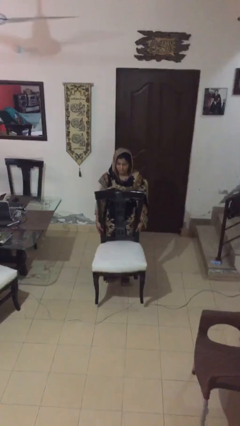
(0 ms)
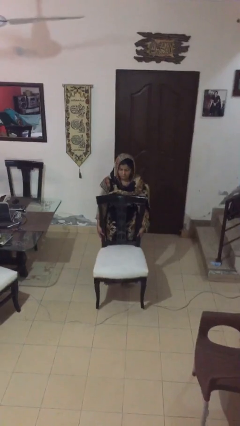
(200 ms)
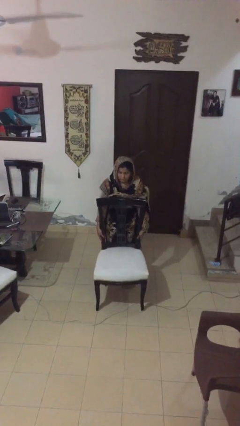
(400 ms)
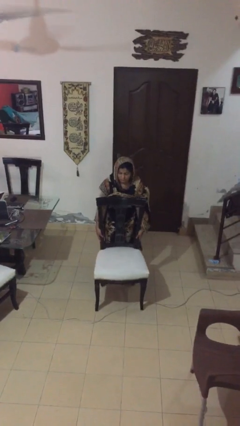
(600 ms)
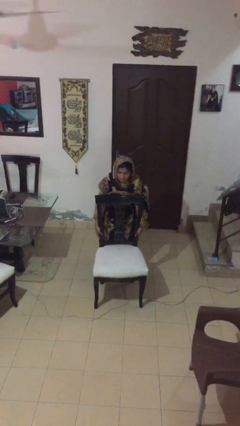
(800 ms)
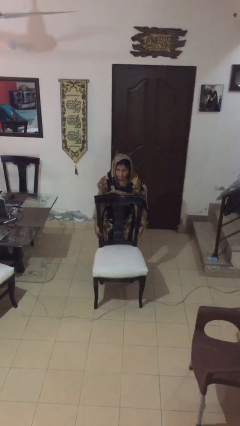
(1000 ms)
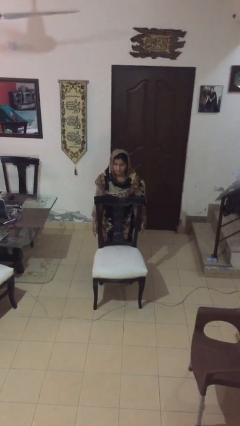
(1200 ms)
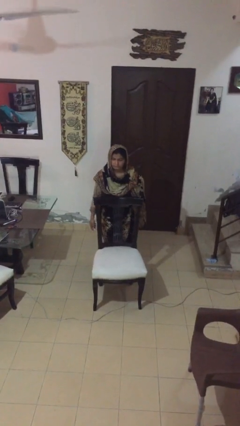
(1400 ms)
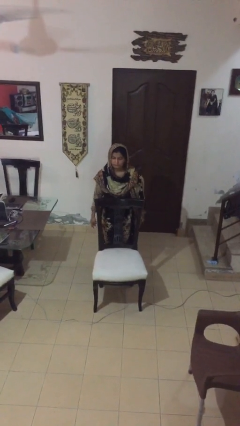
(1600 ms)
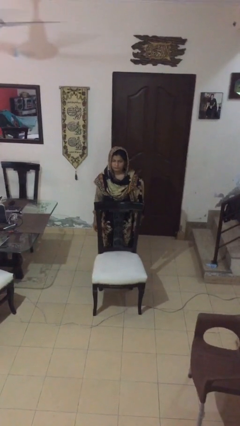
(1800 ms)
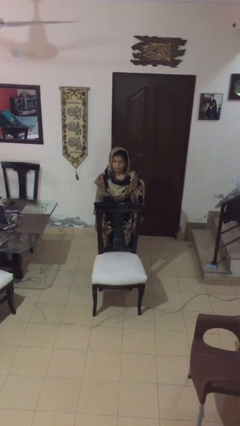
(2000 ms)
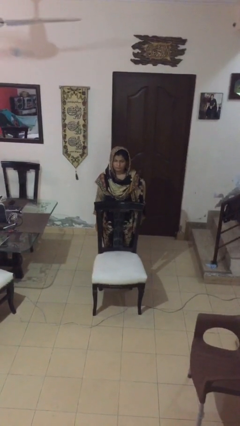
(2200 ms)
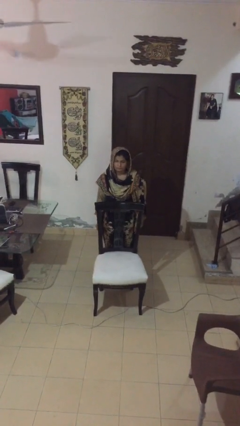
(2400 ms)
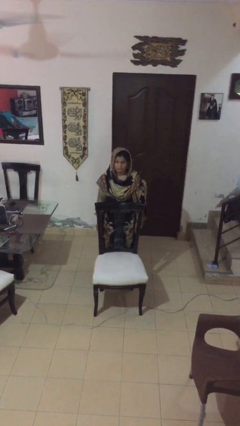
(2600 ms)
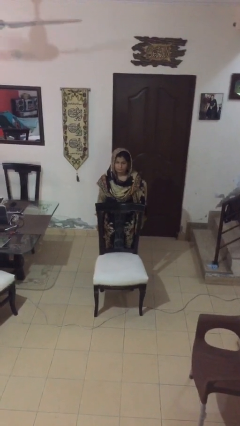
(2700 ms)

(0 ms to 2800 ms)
person puts down object on floor

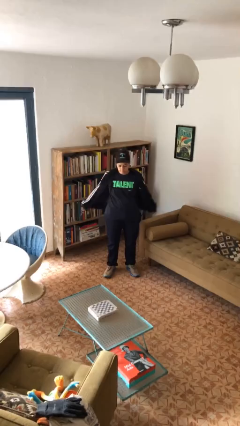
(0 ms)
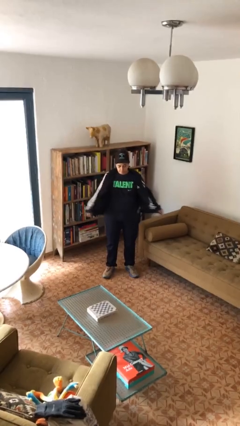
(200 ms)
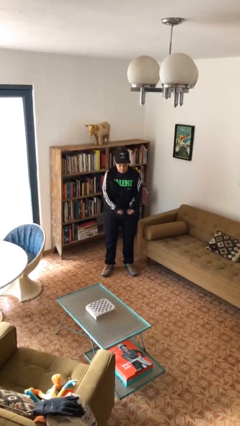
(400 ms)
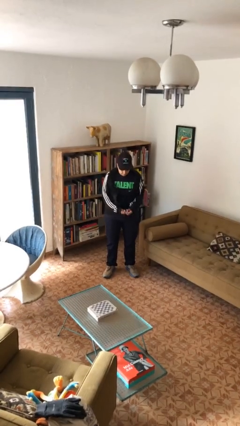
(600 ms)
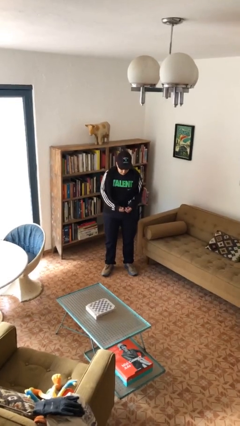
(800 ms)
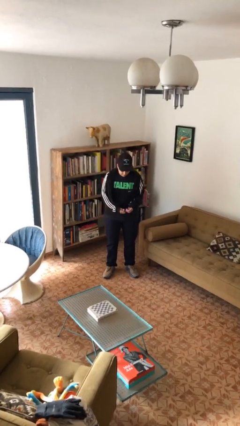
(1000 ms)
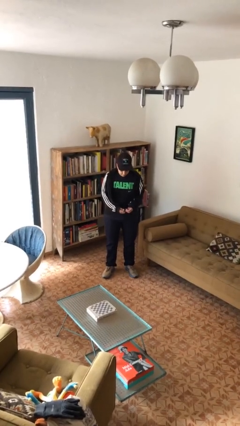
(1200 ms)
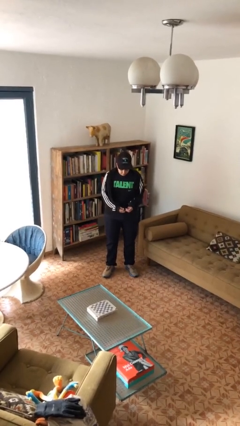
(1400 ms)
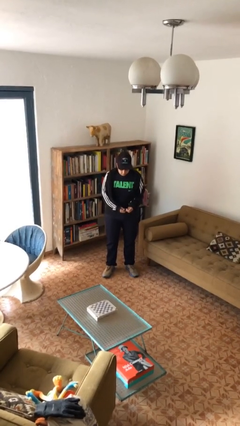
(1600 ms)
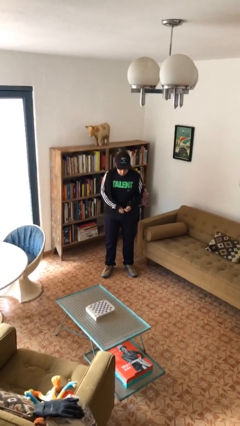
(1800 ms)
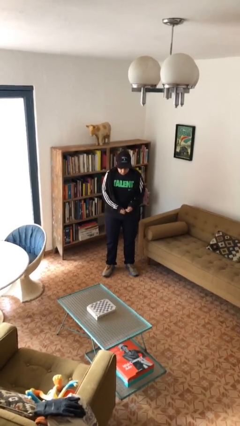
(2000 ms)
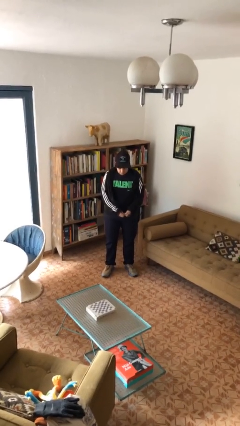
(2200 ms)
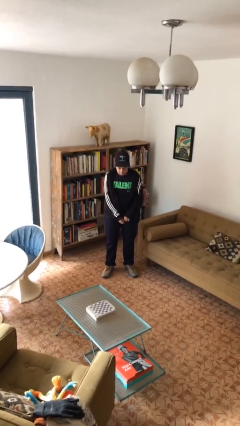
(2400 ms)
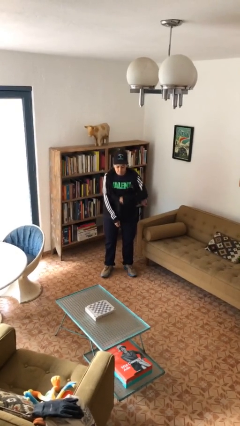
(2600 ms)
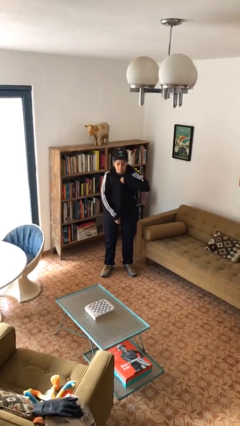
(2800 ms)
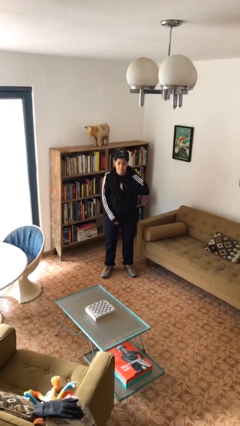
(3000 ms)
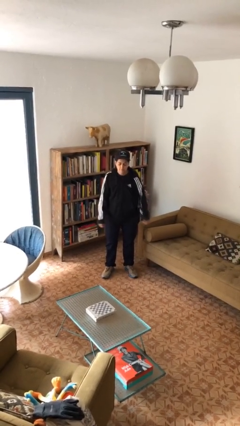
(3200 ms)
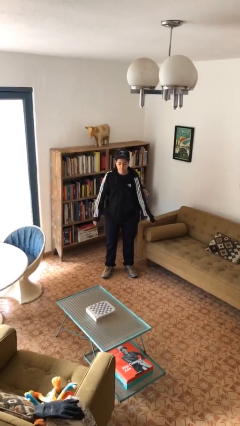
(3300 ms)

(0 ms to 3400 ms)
person zips up jacket

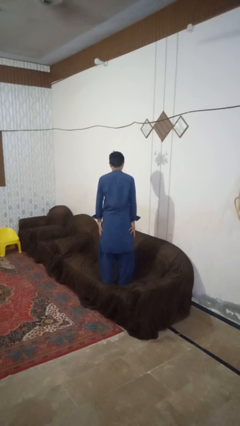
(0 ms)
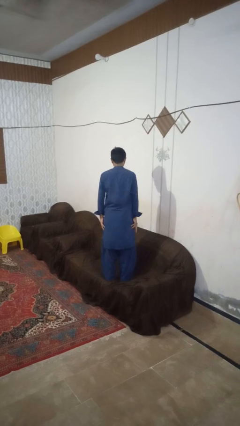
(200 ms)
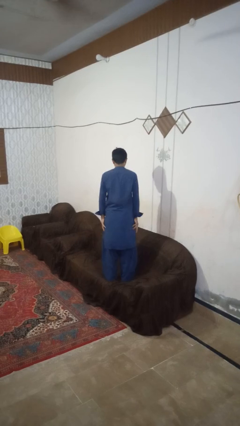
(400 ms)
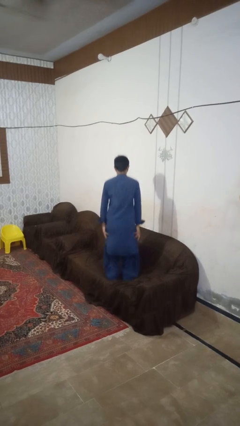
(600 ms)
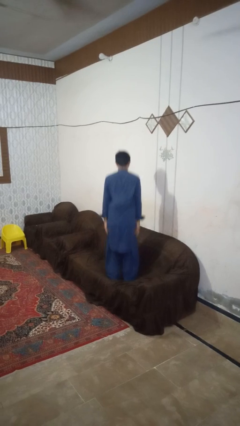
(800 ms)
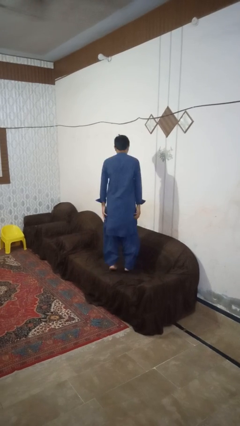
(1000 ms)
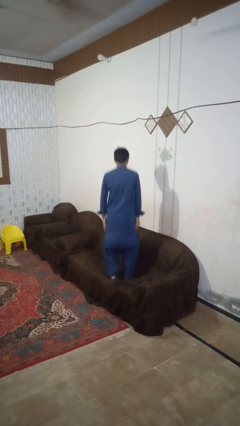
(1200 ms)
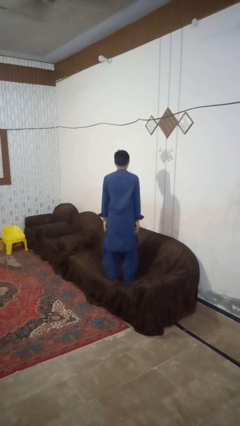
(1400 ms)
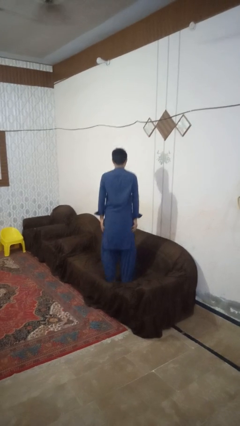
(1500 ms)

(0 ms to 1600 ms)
person jumps on couch

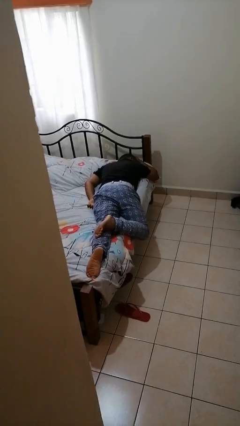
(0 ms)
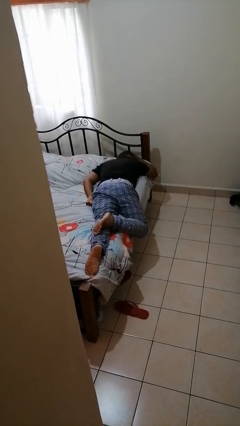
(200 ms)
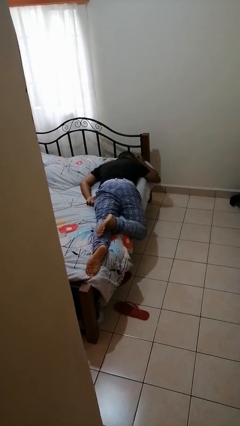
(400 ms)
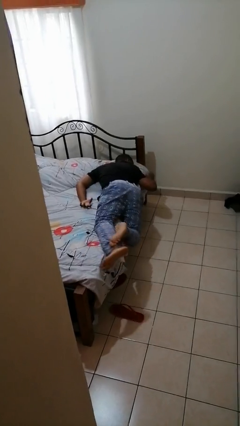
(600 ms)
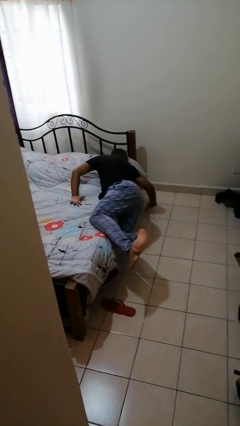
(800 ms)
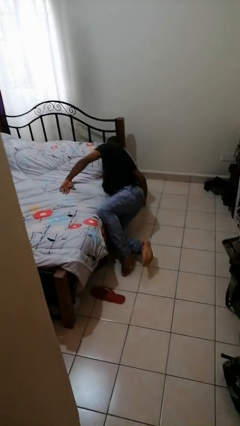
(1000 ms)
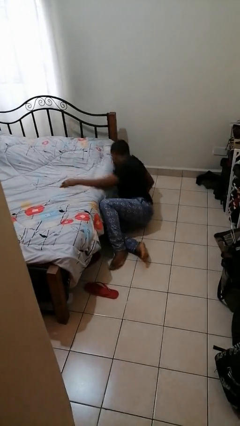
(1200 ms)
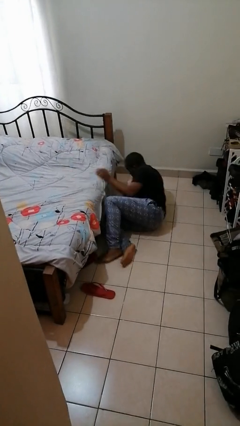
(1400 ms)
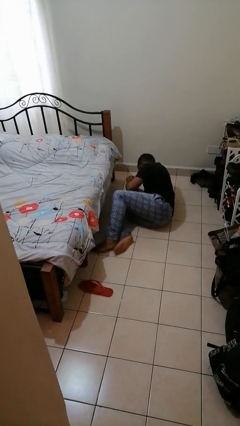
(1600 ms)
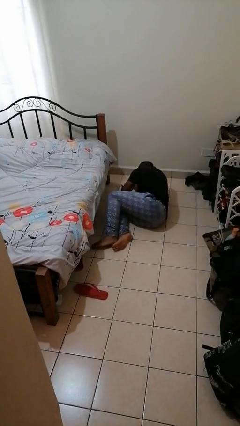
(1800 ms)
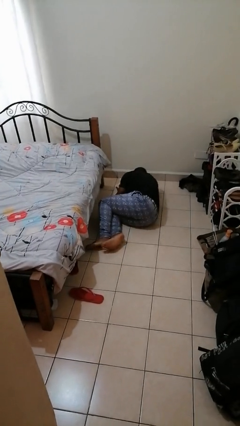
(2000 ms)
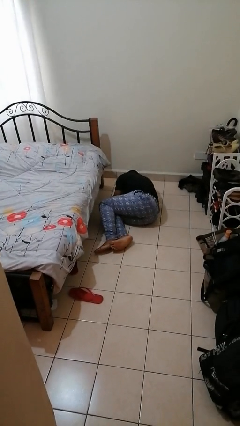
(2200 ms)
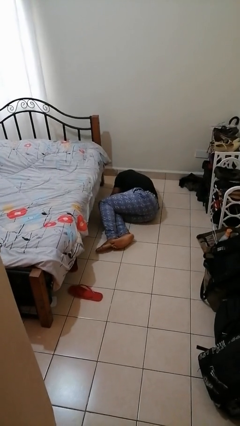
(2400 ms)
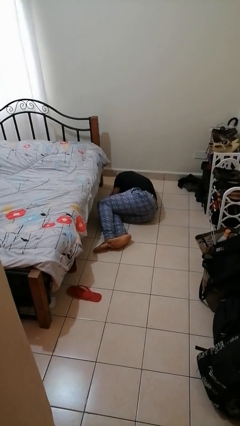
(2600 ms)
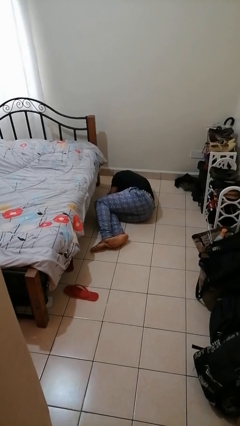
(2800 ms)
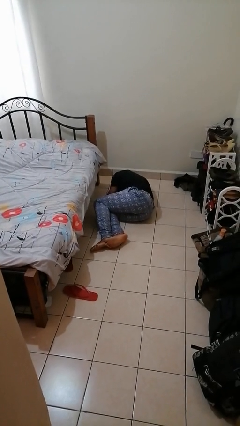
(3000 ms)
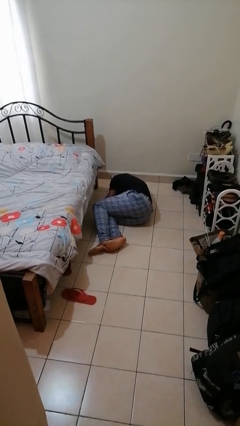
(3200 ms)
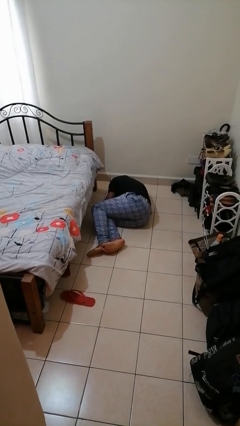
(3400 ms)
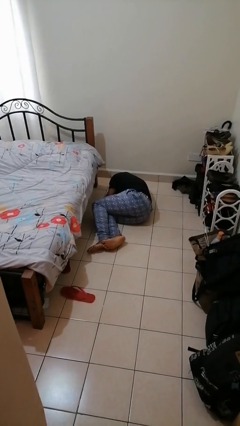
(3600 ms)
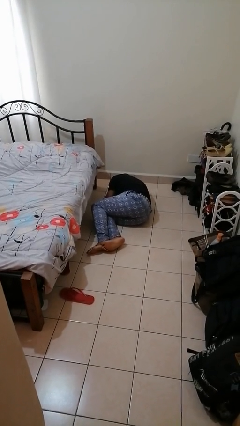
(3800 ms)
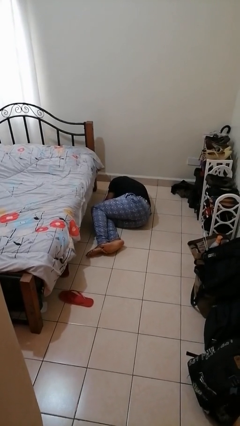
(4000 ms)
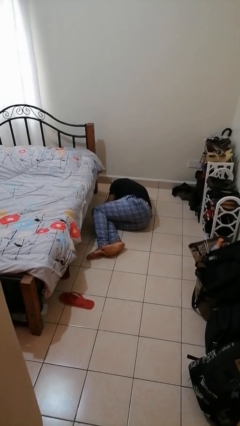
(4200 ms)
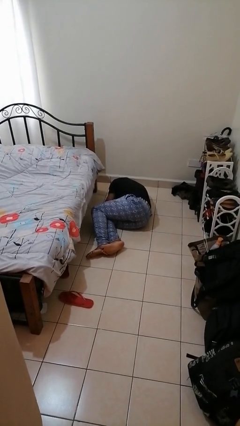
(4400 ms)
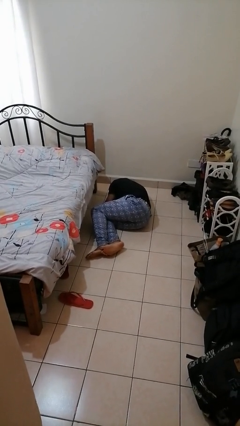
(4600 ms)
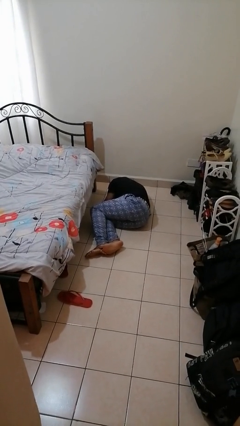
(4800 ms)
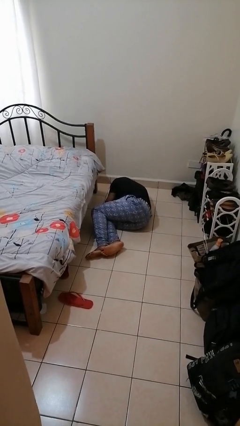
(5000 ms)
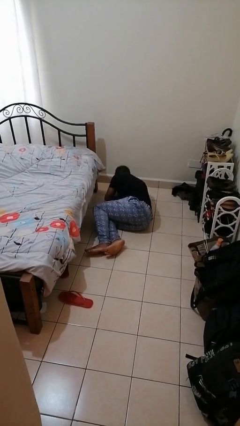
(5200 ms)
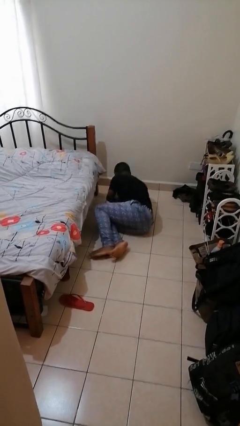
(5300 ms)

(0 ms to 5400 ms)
person falls from bed

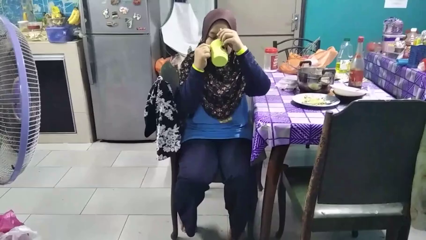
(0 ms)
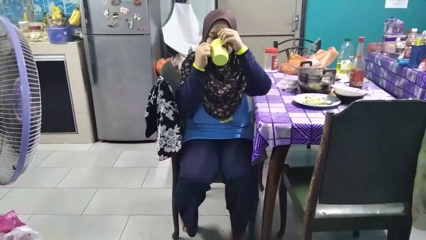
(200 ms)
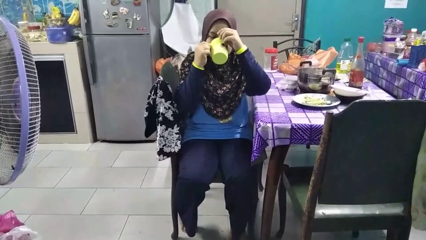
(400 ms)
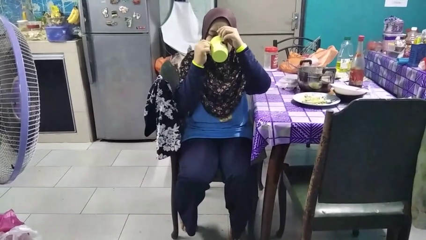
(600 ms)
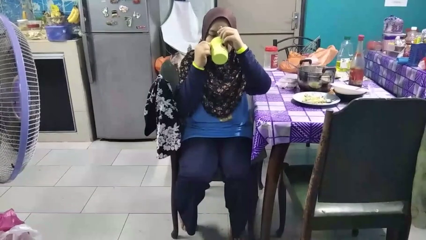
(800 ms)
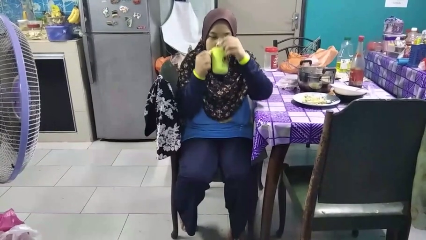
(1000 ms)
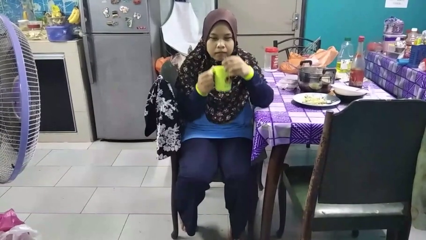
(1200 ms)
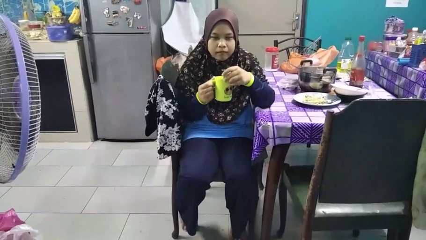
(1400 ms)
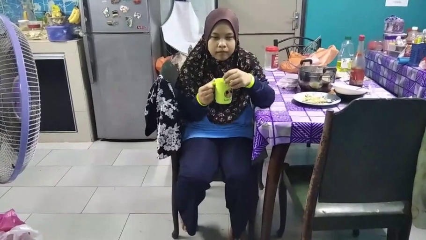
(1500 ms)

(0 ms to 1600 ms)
person drinks from mug

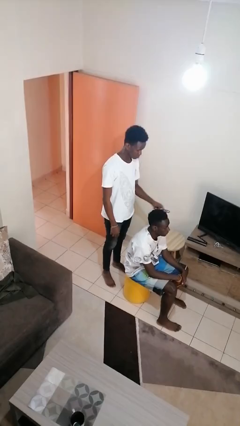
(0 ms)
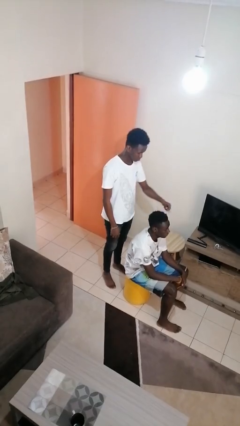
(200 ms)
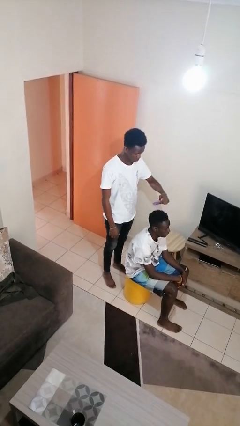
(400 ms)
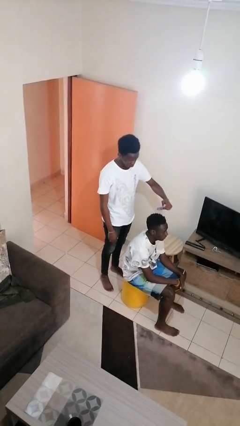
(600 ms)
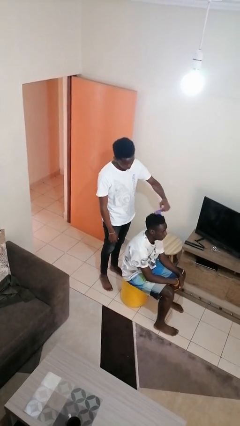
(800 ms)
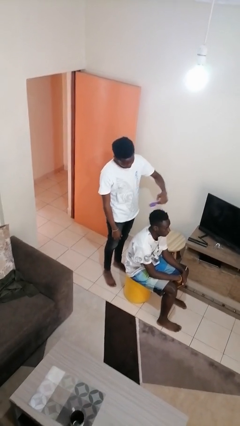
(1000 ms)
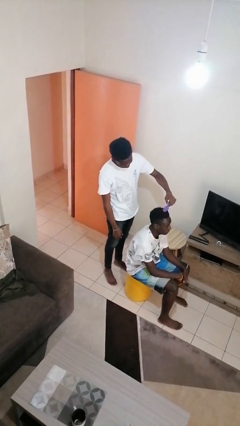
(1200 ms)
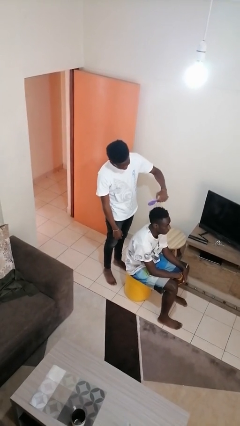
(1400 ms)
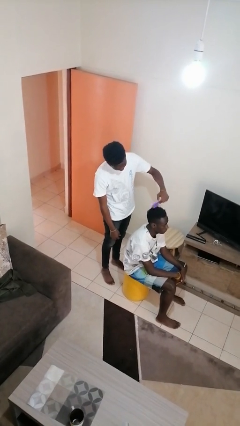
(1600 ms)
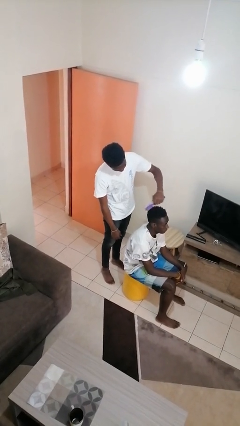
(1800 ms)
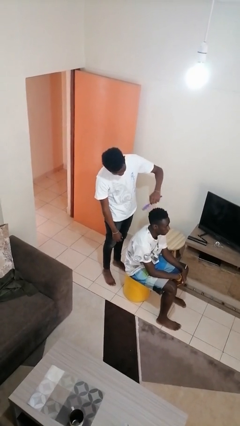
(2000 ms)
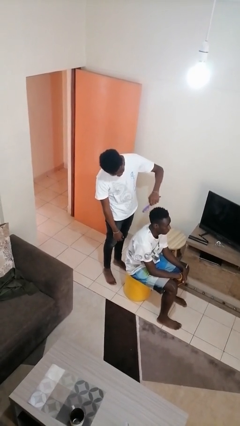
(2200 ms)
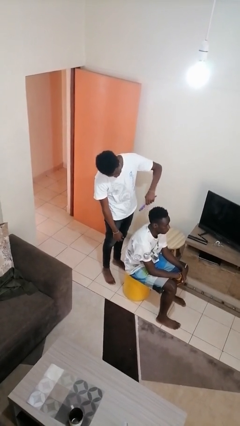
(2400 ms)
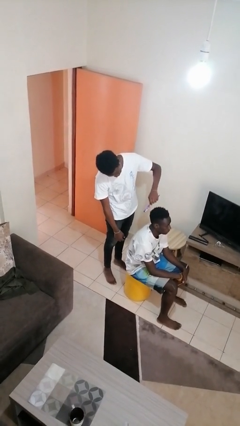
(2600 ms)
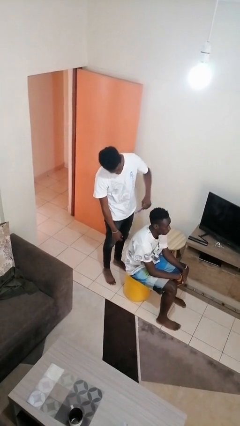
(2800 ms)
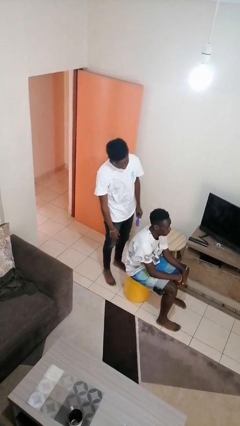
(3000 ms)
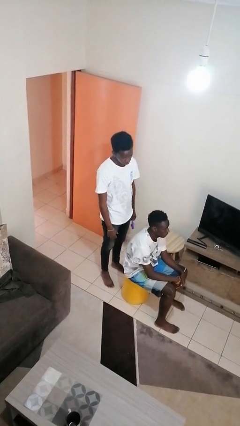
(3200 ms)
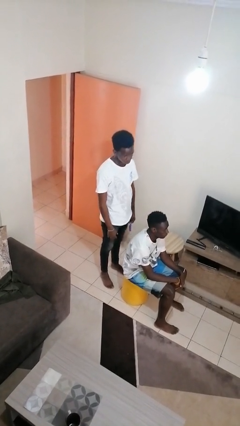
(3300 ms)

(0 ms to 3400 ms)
person brushes hair of person
